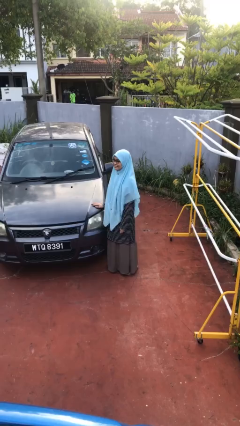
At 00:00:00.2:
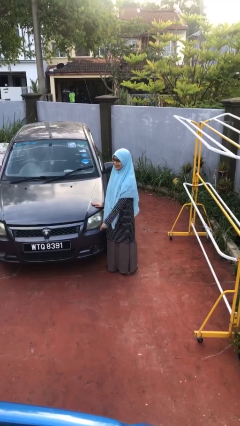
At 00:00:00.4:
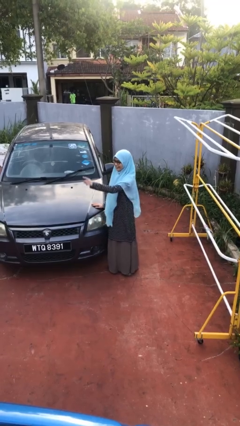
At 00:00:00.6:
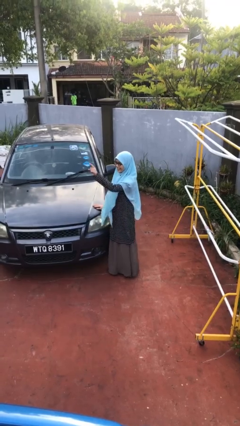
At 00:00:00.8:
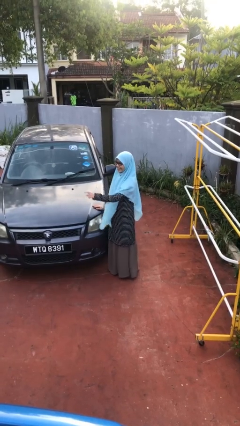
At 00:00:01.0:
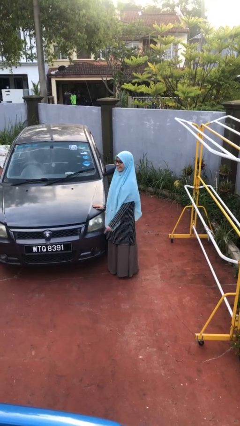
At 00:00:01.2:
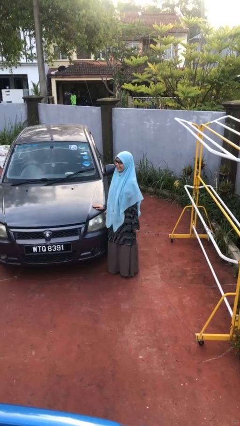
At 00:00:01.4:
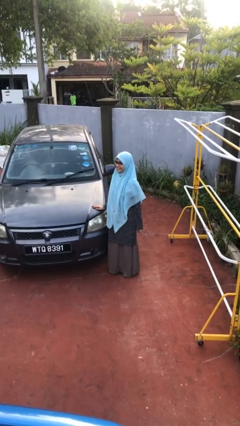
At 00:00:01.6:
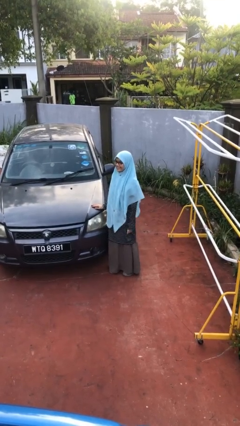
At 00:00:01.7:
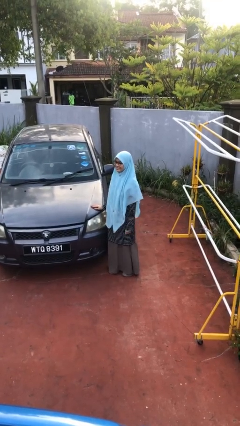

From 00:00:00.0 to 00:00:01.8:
person points at person

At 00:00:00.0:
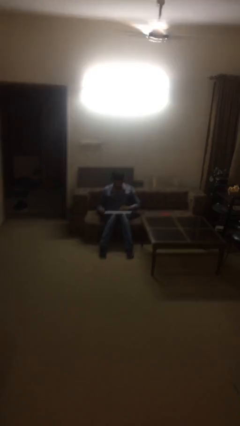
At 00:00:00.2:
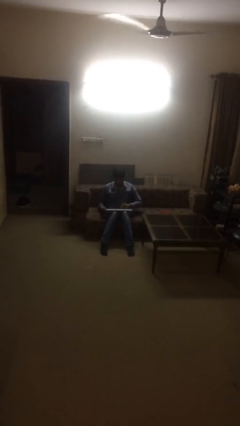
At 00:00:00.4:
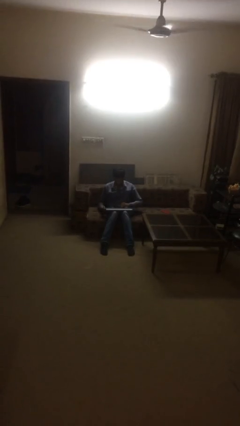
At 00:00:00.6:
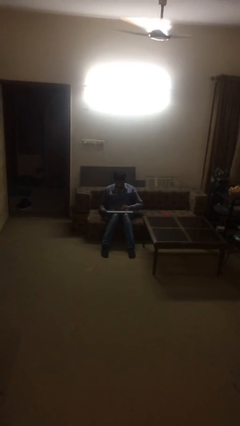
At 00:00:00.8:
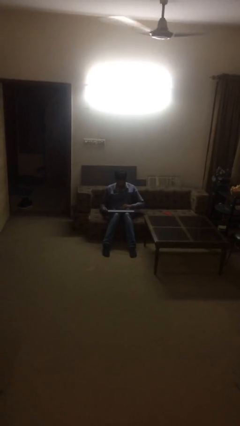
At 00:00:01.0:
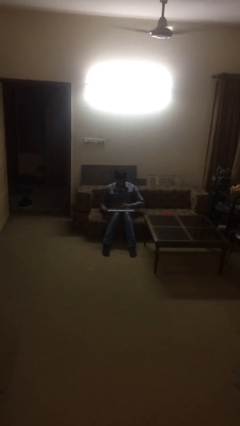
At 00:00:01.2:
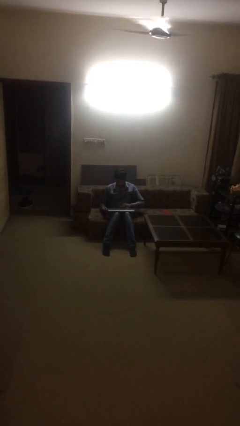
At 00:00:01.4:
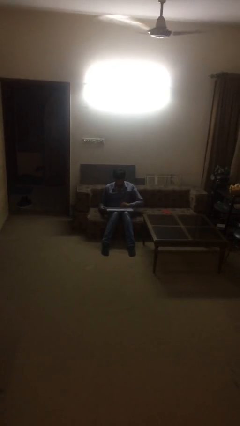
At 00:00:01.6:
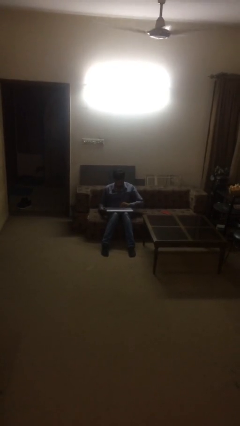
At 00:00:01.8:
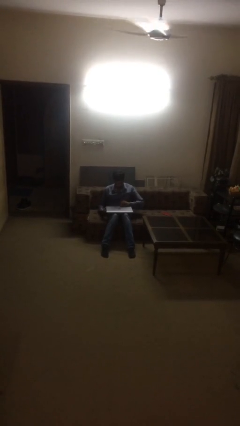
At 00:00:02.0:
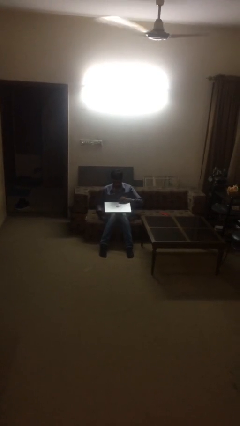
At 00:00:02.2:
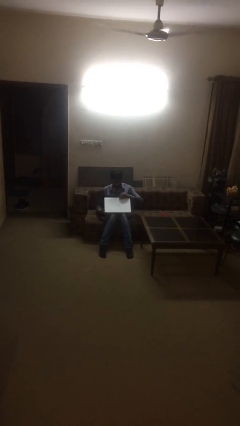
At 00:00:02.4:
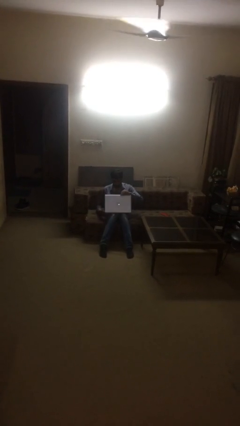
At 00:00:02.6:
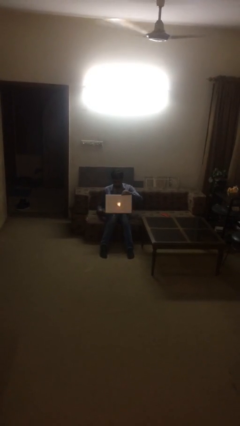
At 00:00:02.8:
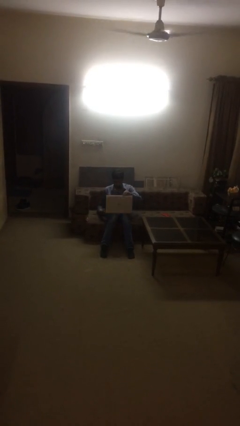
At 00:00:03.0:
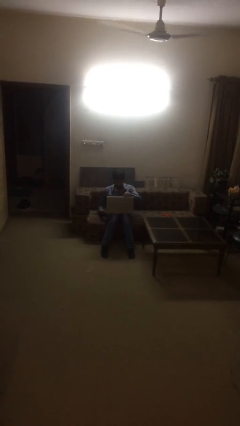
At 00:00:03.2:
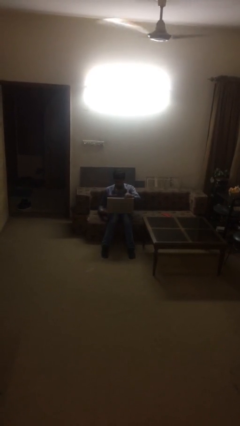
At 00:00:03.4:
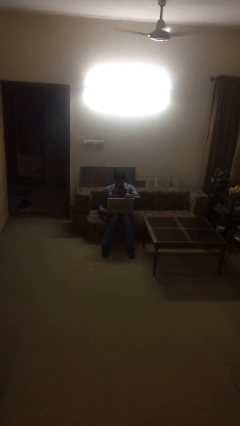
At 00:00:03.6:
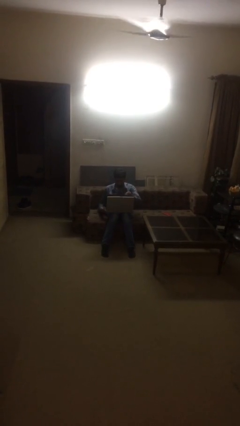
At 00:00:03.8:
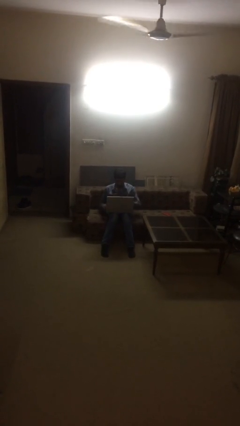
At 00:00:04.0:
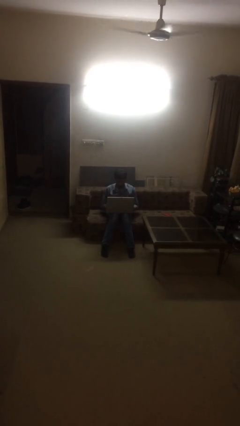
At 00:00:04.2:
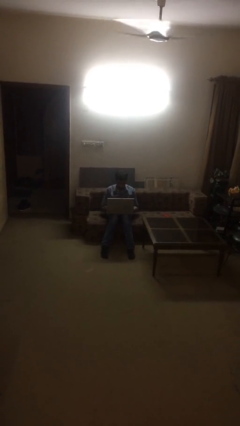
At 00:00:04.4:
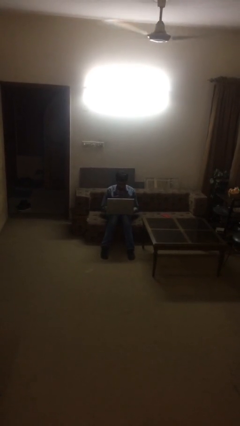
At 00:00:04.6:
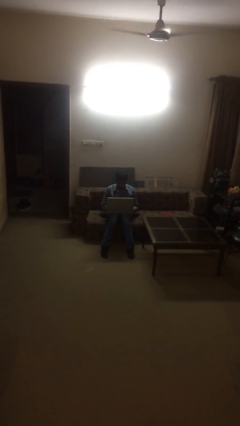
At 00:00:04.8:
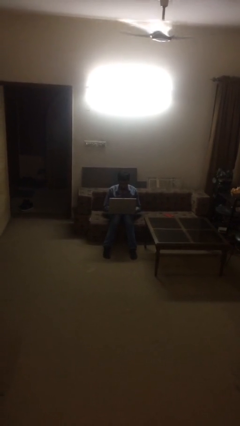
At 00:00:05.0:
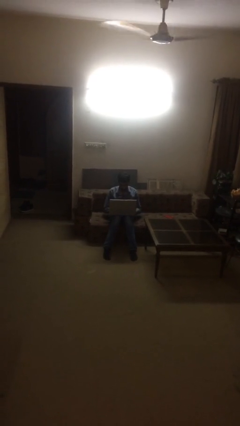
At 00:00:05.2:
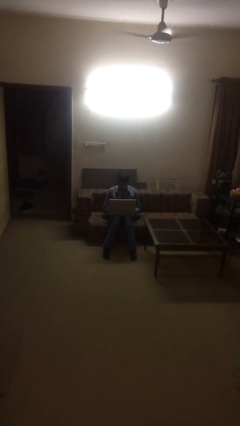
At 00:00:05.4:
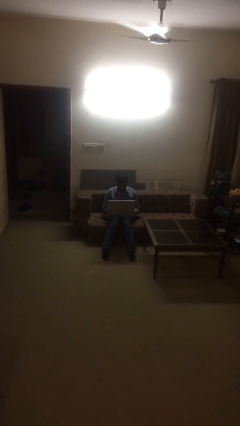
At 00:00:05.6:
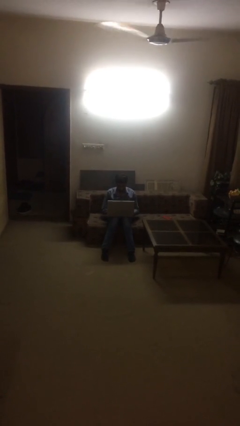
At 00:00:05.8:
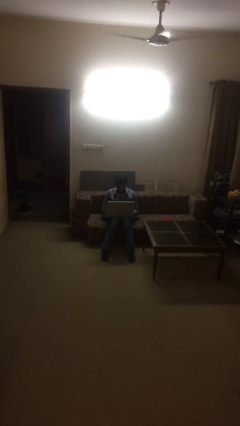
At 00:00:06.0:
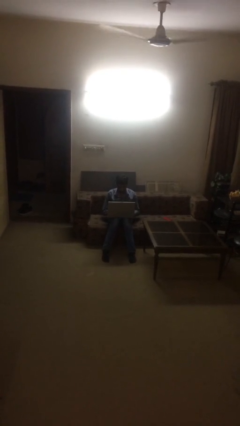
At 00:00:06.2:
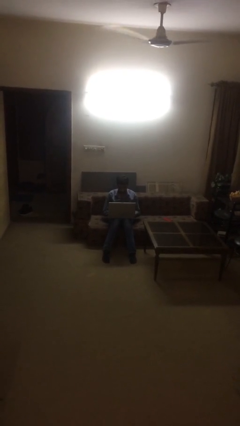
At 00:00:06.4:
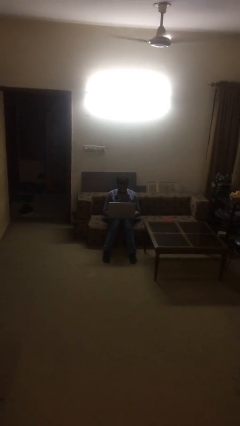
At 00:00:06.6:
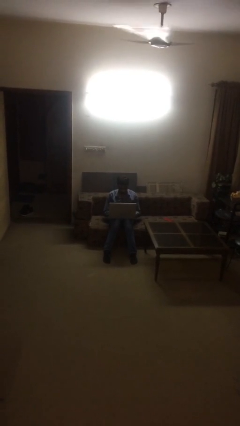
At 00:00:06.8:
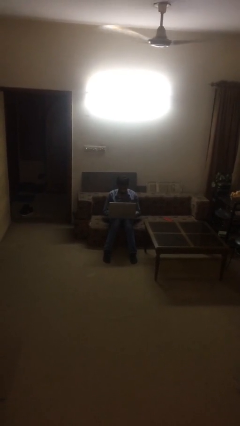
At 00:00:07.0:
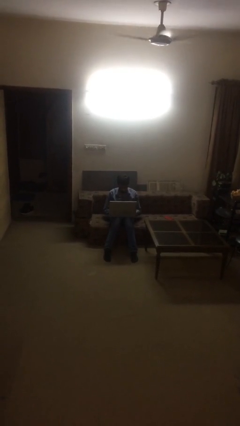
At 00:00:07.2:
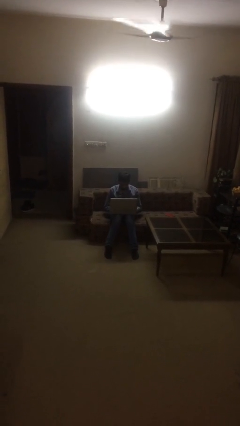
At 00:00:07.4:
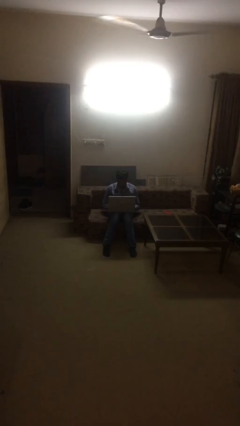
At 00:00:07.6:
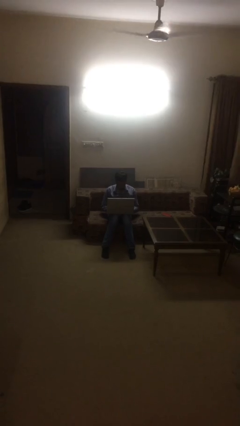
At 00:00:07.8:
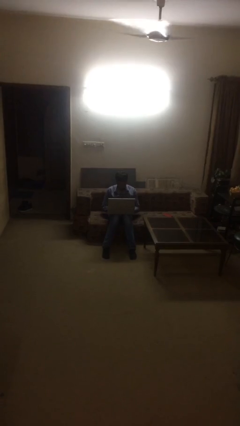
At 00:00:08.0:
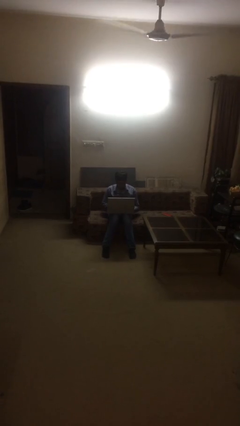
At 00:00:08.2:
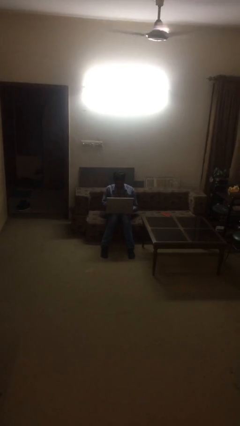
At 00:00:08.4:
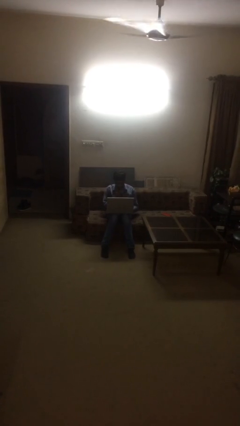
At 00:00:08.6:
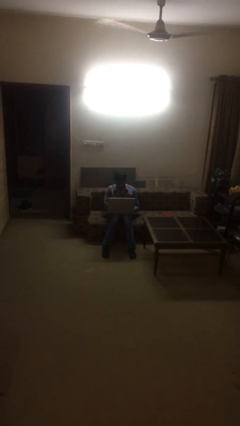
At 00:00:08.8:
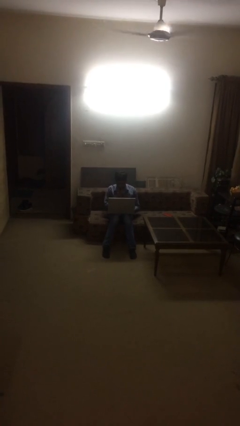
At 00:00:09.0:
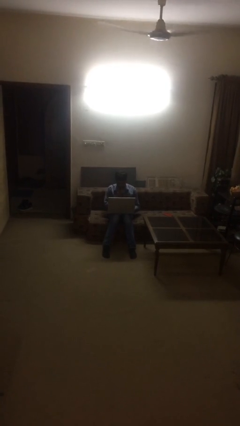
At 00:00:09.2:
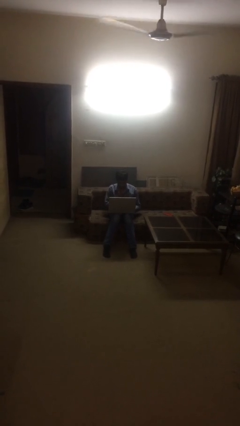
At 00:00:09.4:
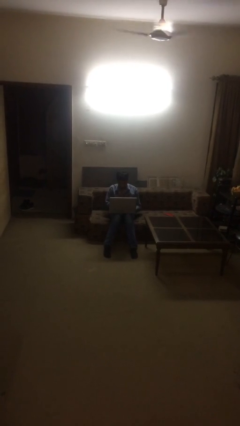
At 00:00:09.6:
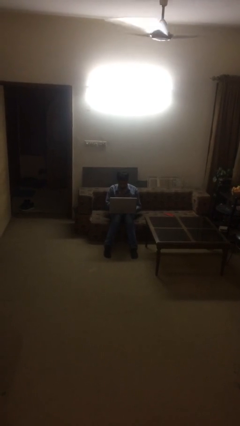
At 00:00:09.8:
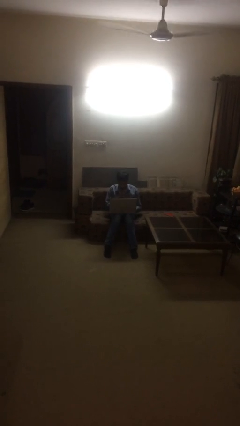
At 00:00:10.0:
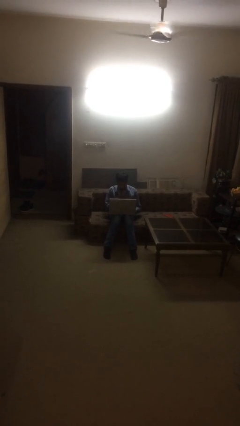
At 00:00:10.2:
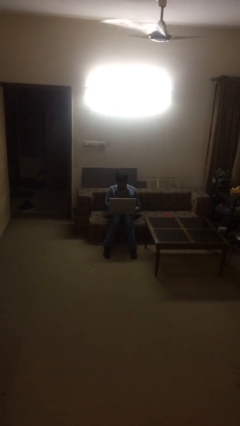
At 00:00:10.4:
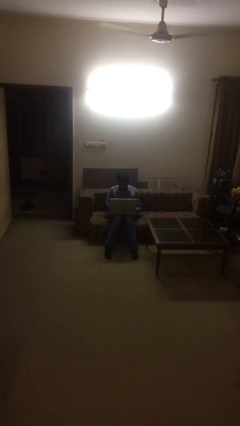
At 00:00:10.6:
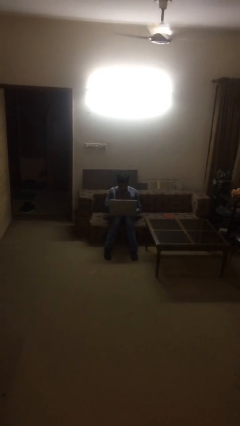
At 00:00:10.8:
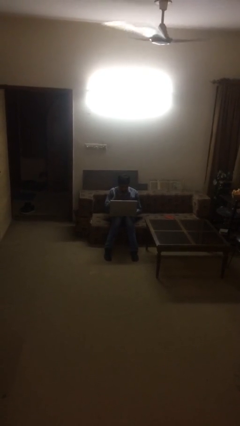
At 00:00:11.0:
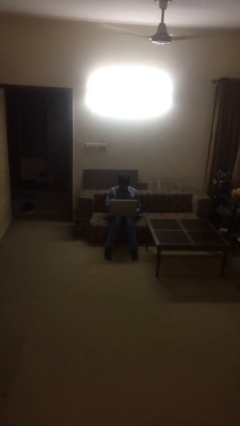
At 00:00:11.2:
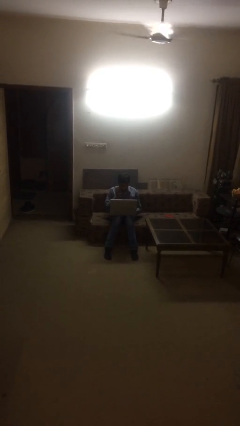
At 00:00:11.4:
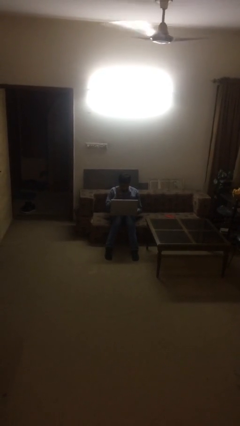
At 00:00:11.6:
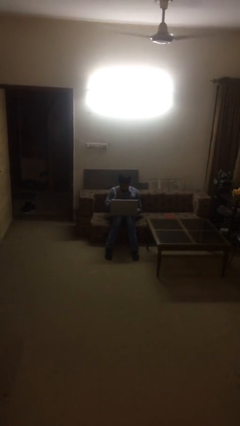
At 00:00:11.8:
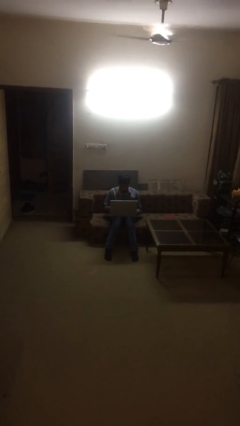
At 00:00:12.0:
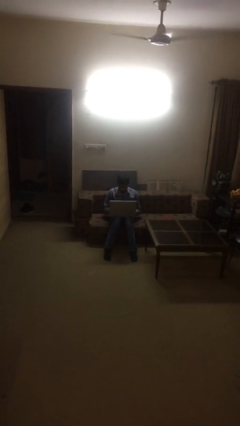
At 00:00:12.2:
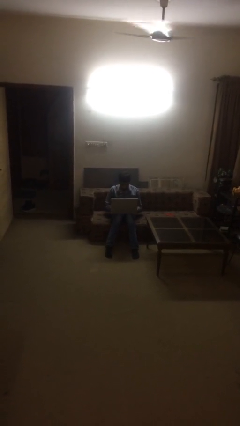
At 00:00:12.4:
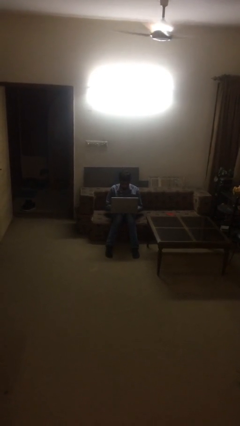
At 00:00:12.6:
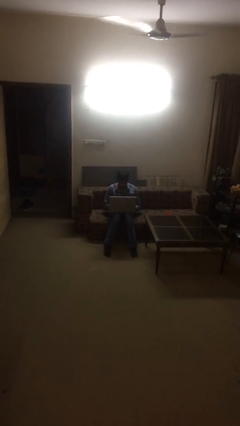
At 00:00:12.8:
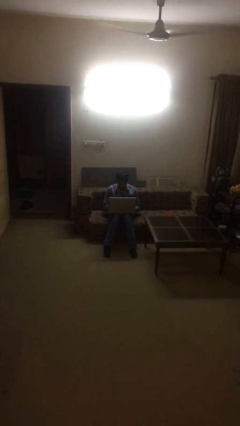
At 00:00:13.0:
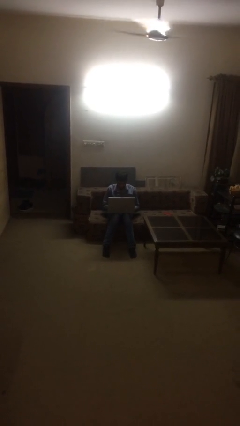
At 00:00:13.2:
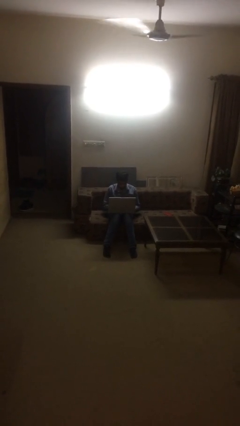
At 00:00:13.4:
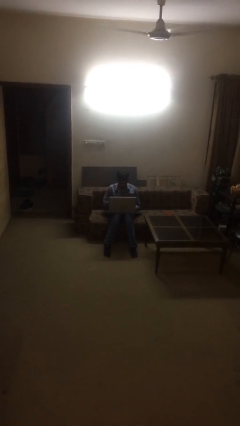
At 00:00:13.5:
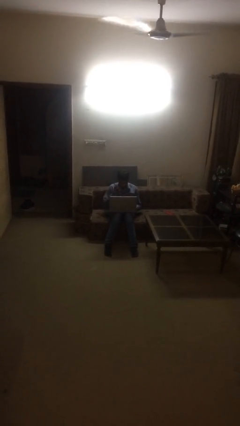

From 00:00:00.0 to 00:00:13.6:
person interacts with laptop

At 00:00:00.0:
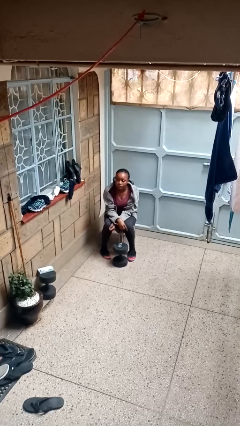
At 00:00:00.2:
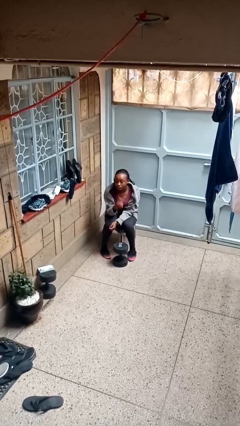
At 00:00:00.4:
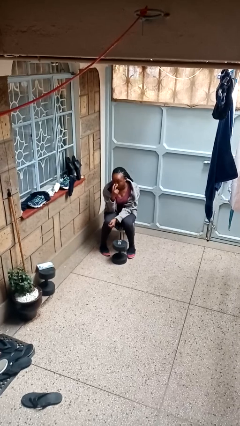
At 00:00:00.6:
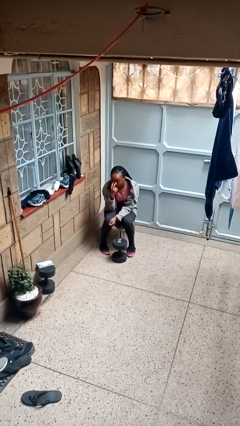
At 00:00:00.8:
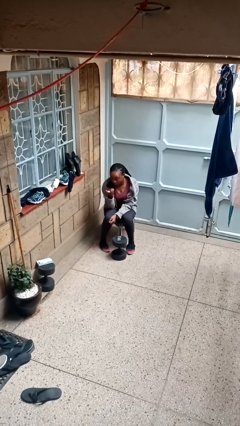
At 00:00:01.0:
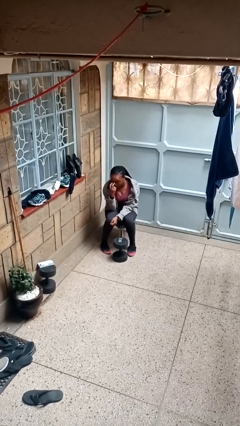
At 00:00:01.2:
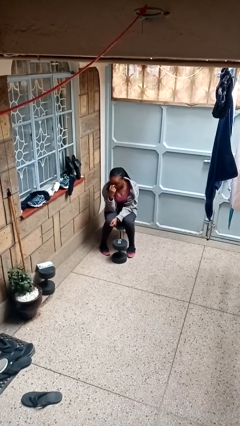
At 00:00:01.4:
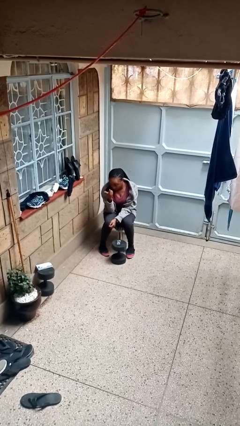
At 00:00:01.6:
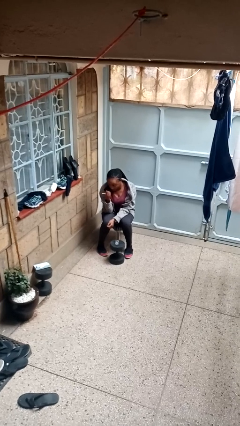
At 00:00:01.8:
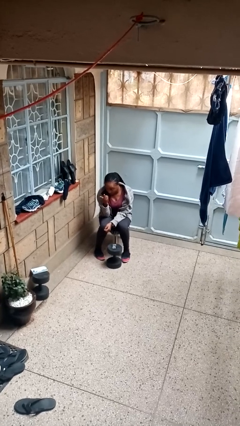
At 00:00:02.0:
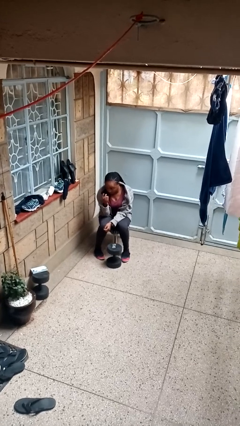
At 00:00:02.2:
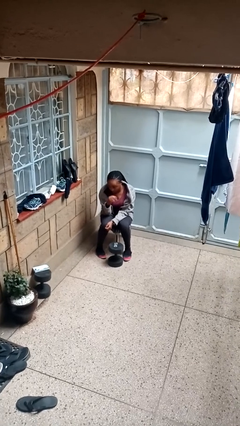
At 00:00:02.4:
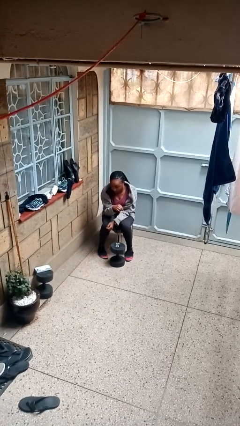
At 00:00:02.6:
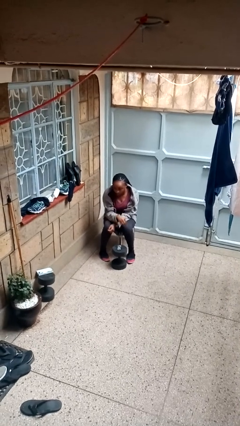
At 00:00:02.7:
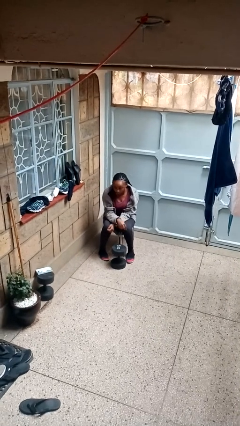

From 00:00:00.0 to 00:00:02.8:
person gestures watch closely
